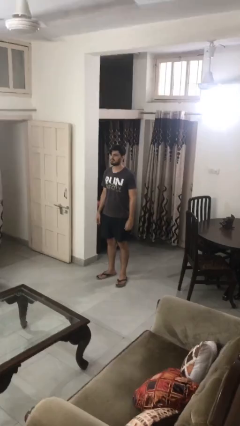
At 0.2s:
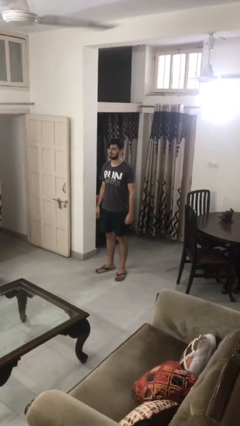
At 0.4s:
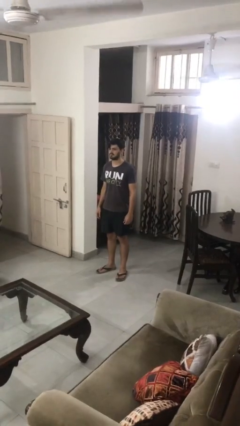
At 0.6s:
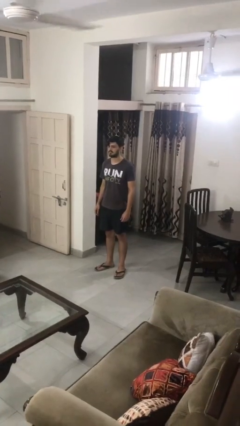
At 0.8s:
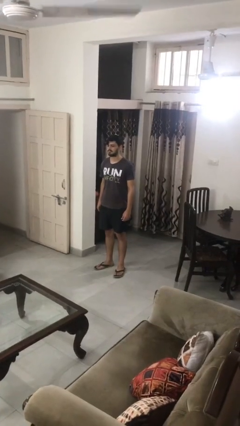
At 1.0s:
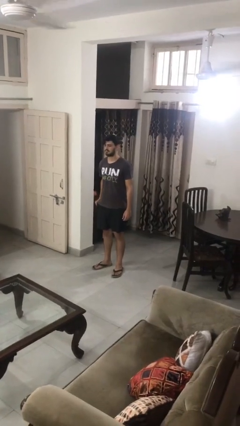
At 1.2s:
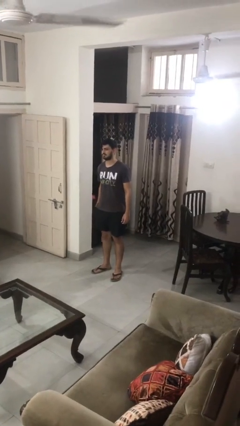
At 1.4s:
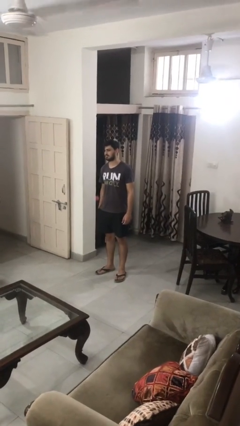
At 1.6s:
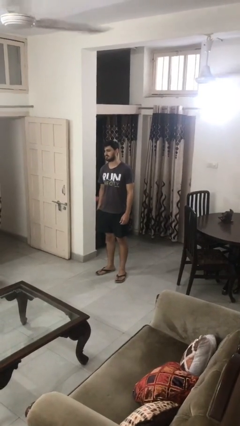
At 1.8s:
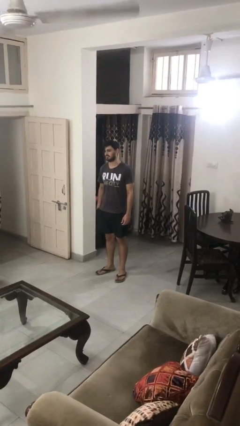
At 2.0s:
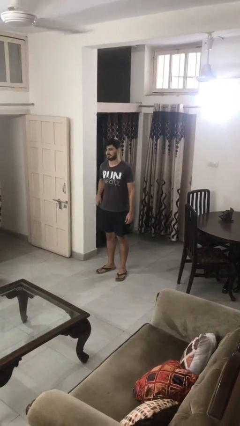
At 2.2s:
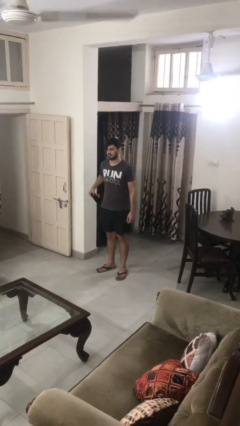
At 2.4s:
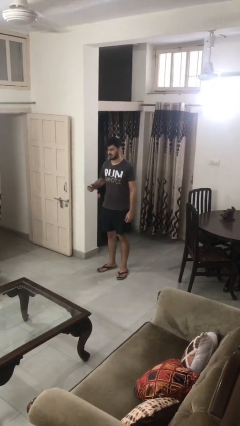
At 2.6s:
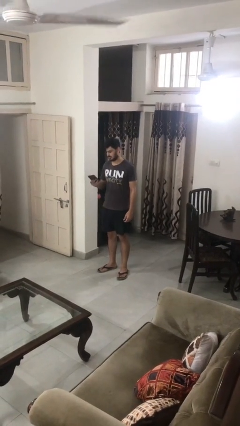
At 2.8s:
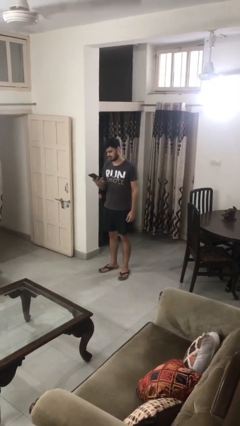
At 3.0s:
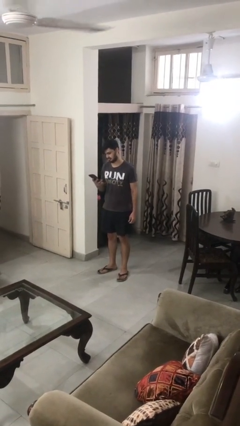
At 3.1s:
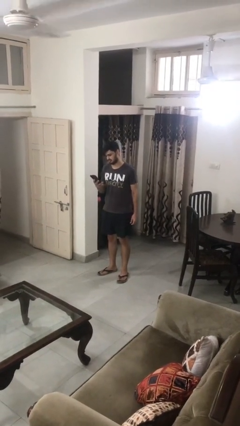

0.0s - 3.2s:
person takes phone from pocket

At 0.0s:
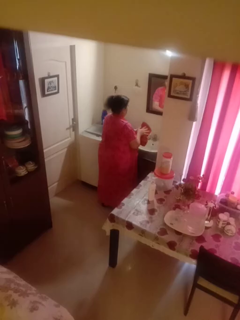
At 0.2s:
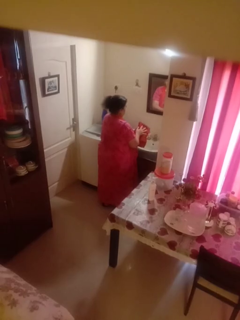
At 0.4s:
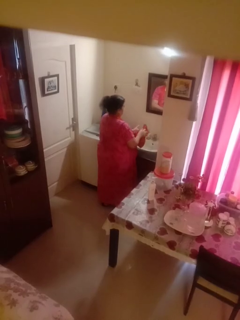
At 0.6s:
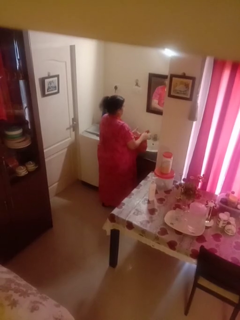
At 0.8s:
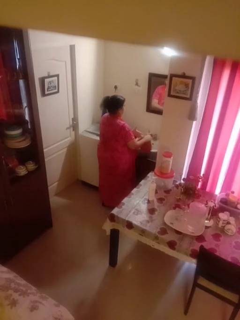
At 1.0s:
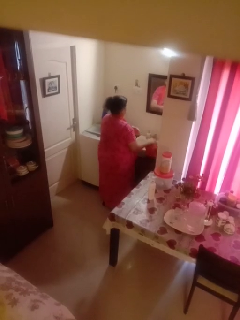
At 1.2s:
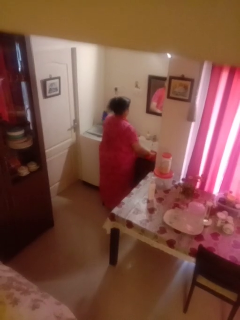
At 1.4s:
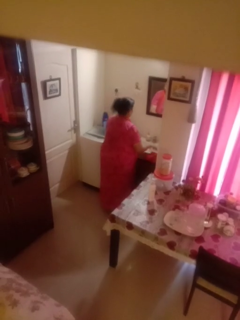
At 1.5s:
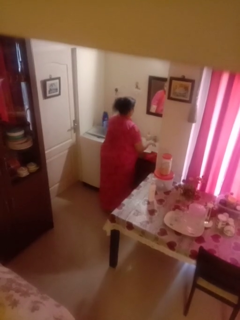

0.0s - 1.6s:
person dries hands with towel

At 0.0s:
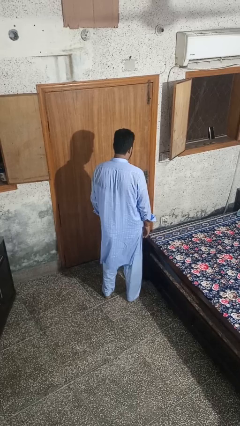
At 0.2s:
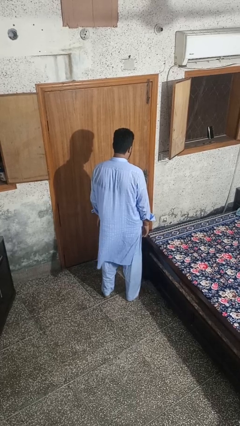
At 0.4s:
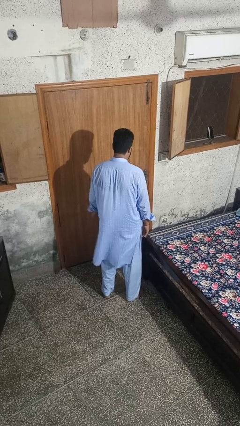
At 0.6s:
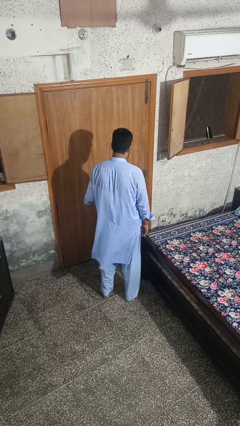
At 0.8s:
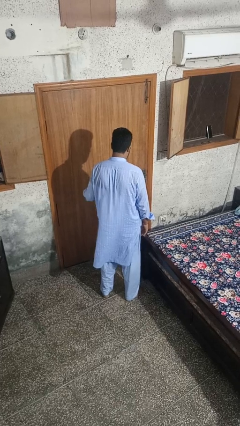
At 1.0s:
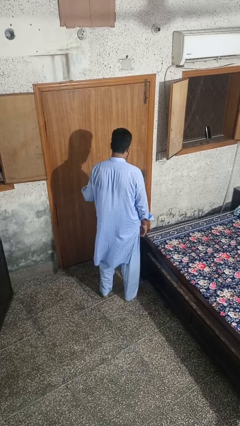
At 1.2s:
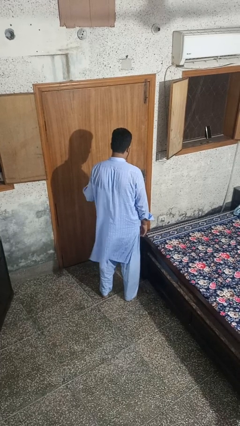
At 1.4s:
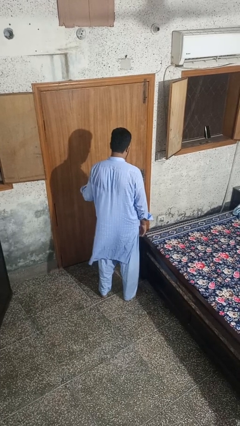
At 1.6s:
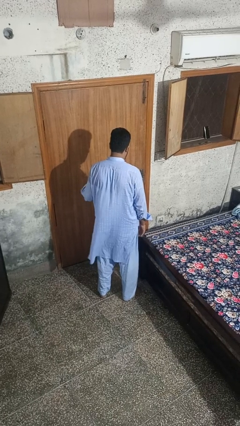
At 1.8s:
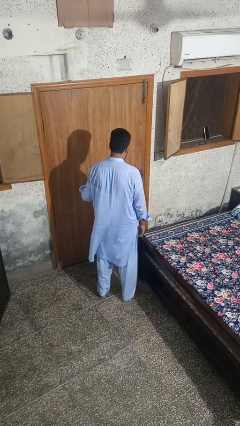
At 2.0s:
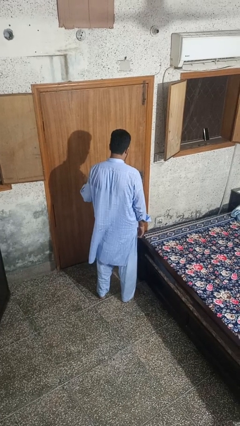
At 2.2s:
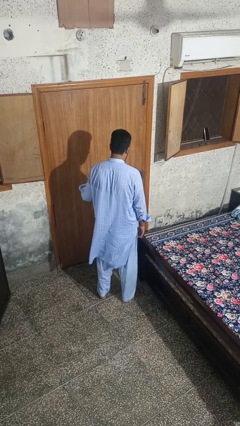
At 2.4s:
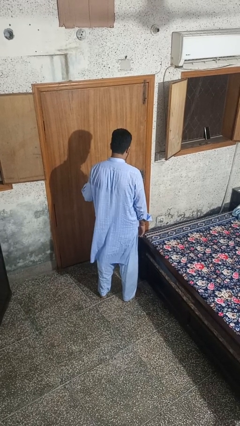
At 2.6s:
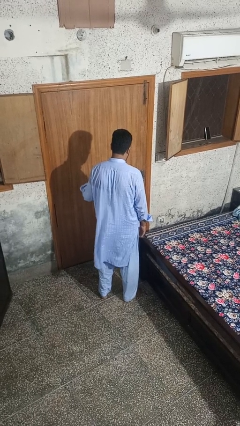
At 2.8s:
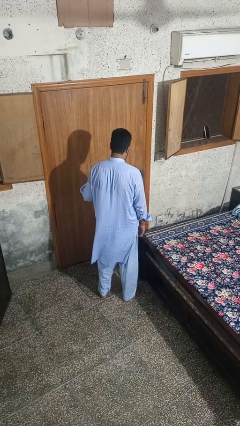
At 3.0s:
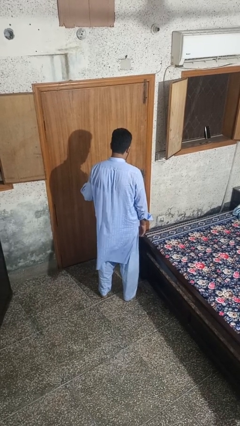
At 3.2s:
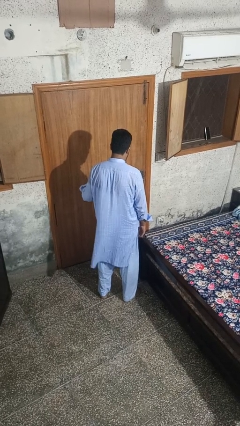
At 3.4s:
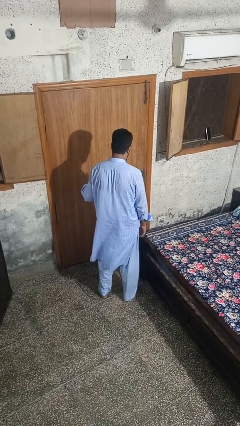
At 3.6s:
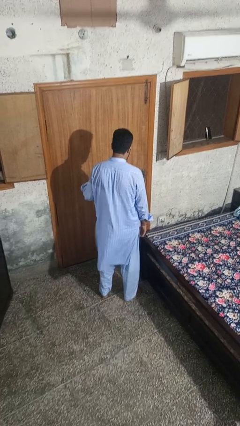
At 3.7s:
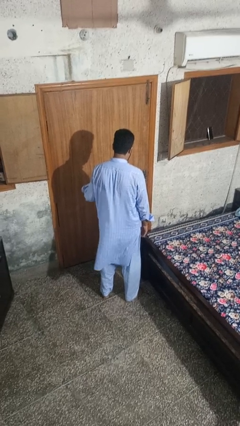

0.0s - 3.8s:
person gestures hang loose

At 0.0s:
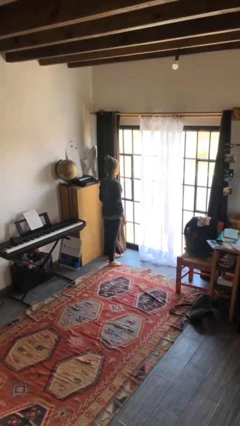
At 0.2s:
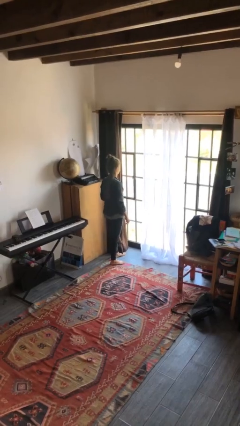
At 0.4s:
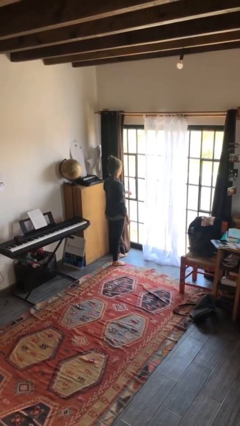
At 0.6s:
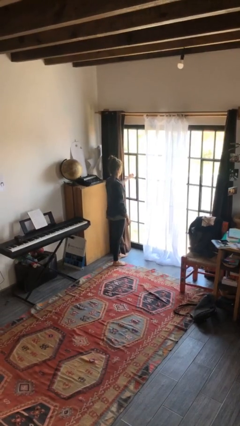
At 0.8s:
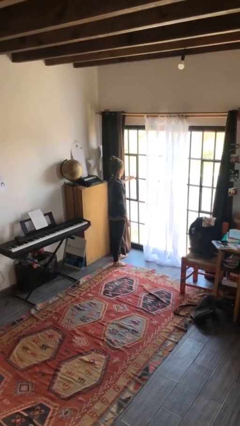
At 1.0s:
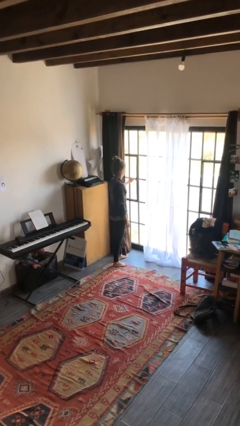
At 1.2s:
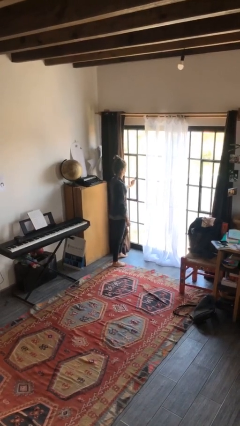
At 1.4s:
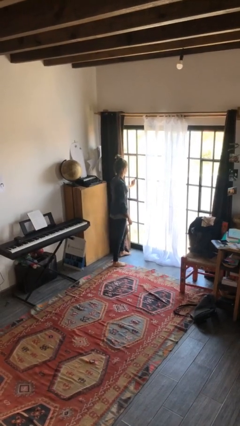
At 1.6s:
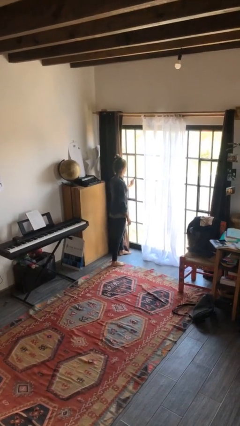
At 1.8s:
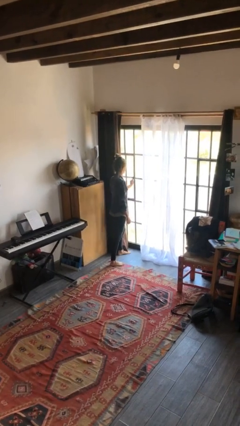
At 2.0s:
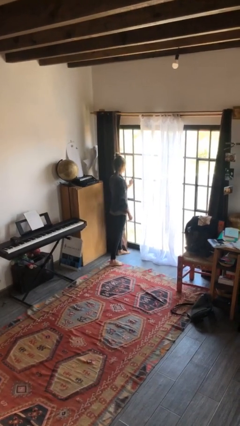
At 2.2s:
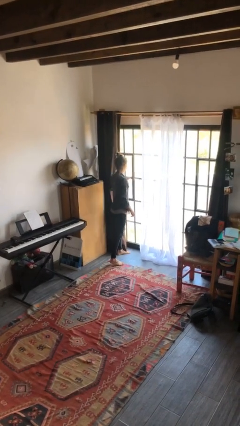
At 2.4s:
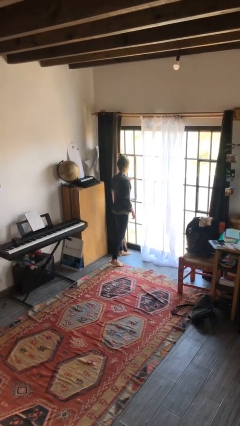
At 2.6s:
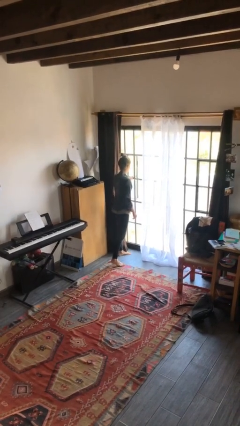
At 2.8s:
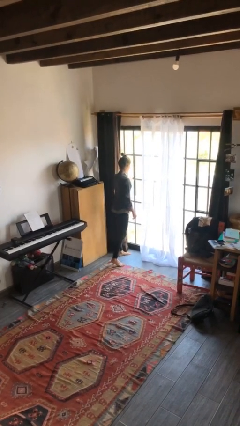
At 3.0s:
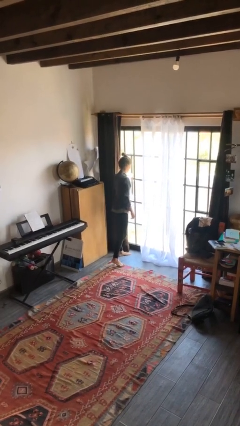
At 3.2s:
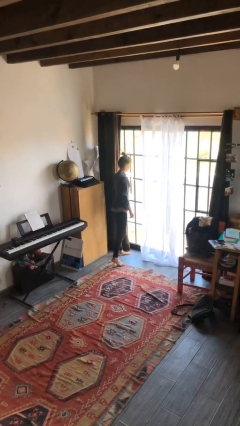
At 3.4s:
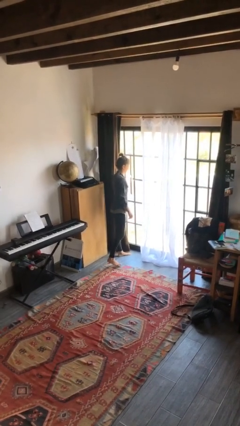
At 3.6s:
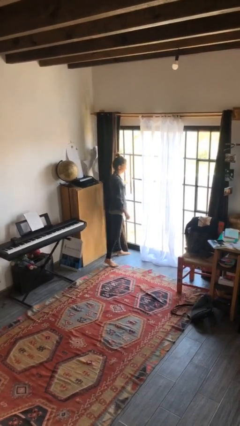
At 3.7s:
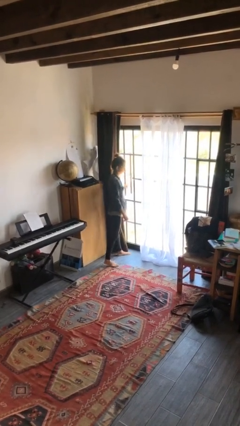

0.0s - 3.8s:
person opens home window

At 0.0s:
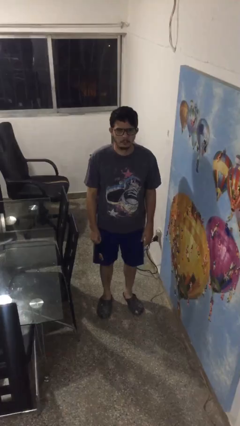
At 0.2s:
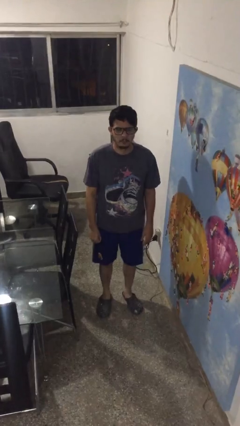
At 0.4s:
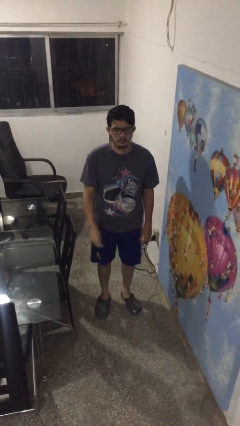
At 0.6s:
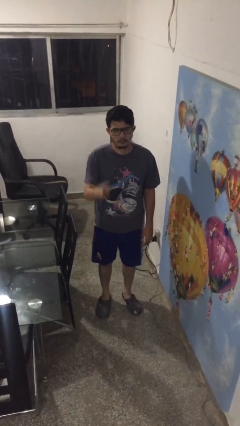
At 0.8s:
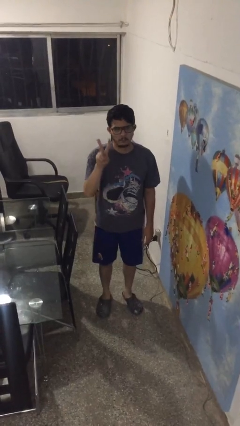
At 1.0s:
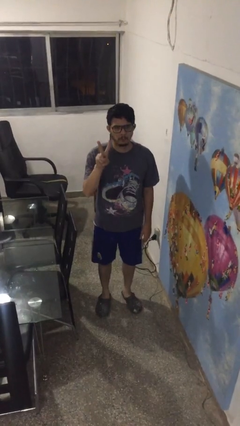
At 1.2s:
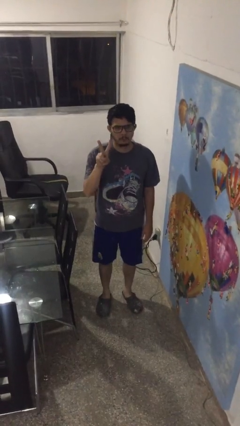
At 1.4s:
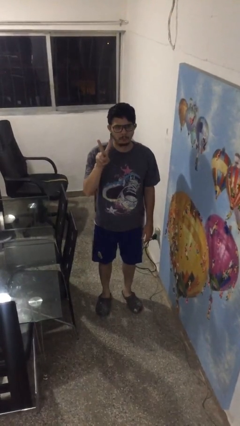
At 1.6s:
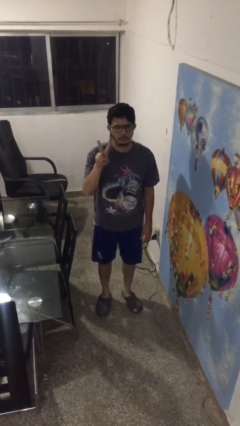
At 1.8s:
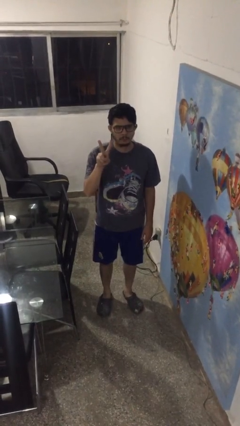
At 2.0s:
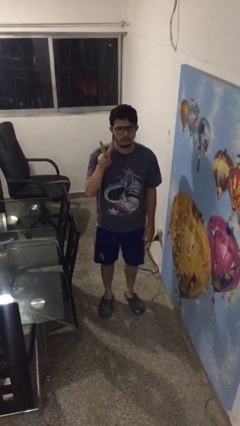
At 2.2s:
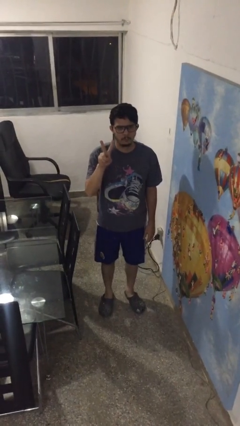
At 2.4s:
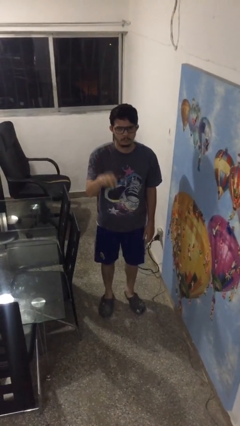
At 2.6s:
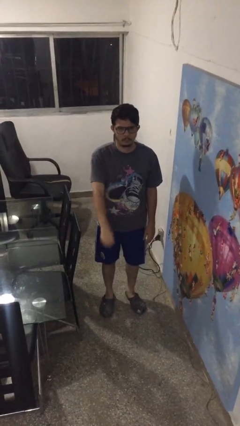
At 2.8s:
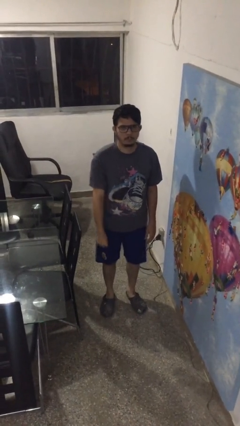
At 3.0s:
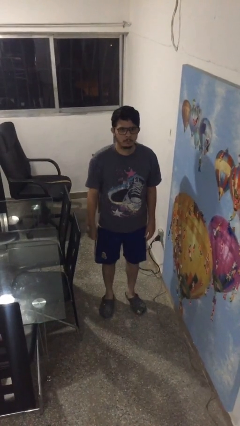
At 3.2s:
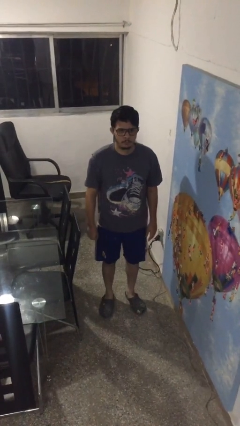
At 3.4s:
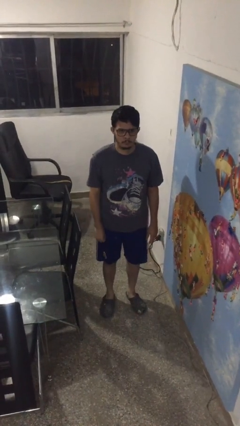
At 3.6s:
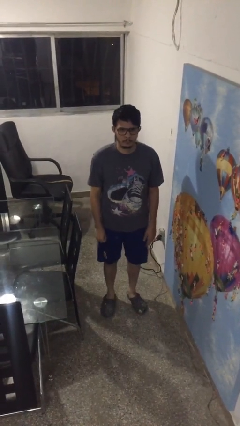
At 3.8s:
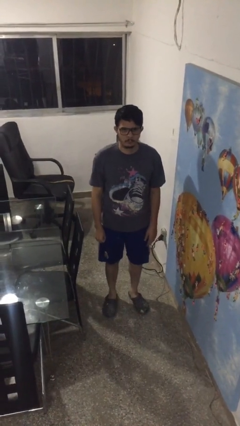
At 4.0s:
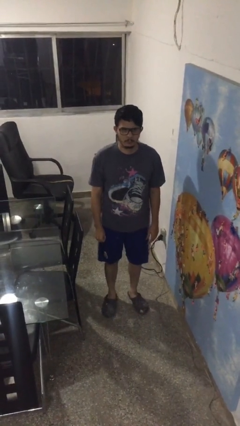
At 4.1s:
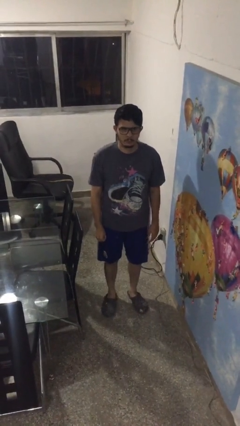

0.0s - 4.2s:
person gestures peace

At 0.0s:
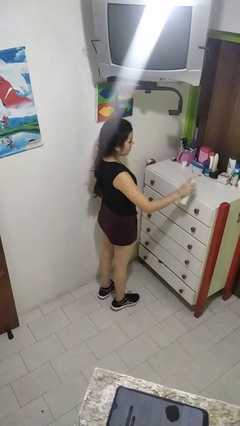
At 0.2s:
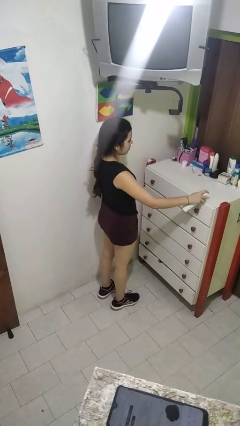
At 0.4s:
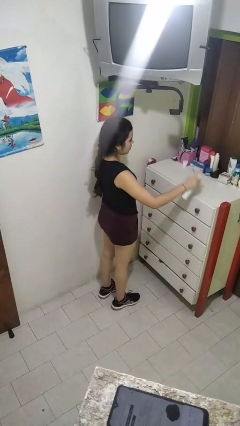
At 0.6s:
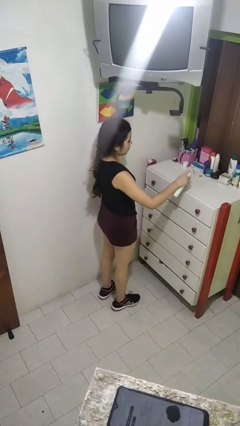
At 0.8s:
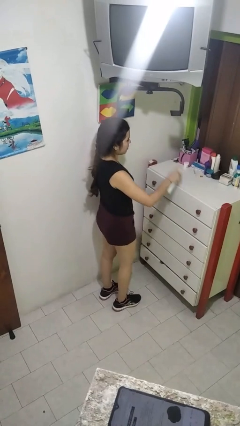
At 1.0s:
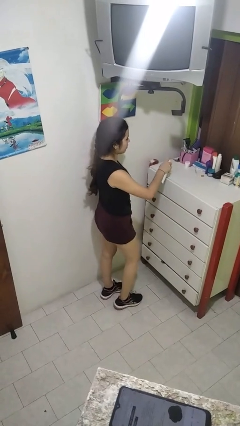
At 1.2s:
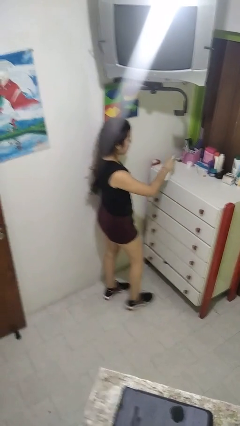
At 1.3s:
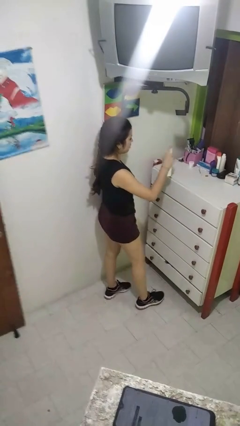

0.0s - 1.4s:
person sprays from bottle
